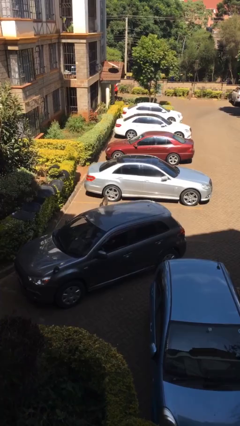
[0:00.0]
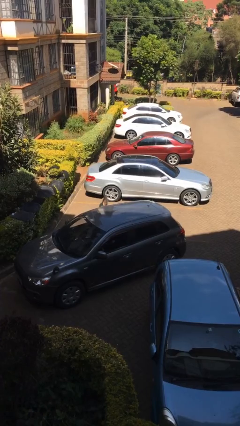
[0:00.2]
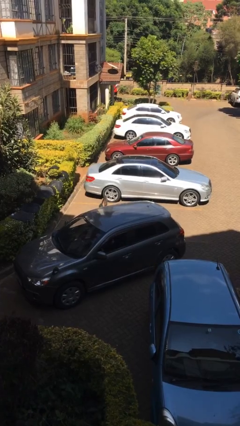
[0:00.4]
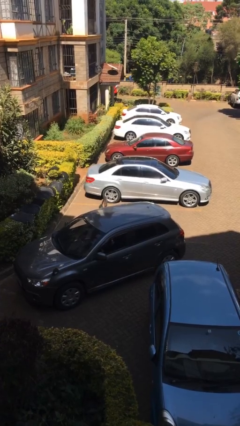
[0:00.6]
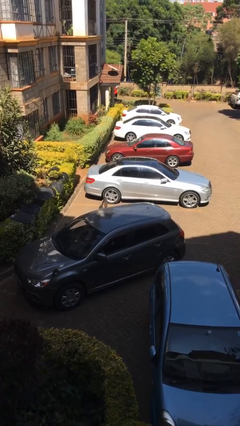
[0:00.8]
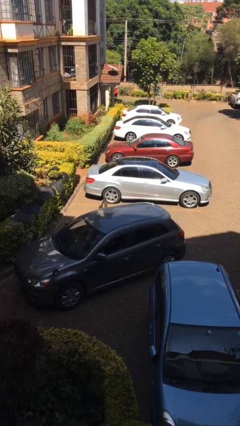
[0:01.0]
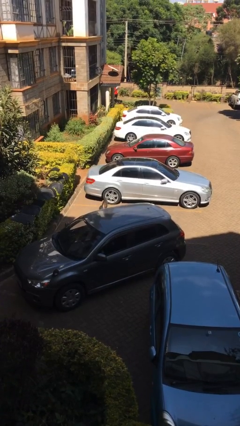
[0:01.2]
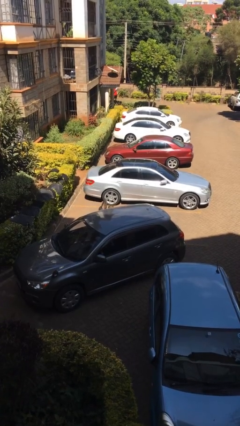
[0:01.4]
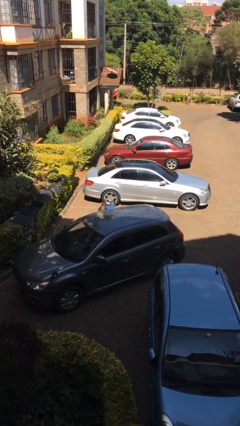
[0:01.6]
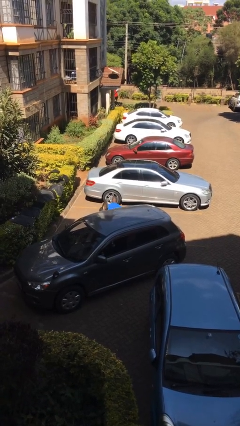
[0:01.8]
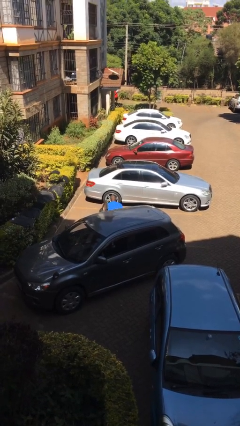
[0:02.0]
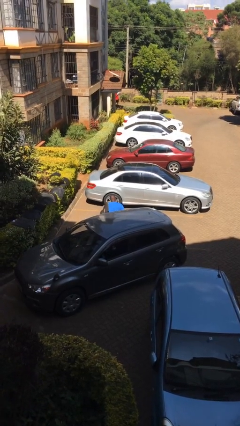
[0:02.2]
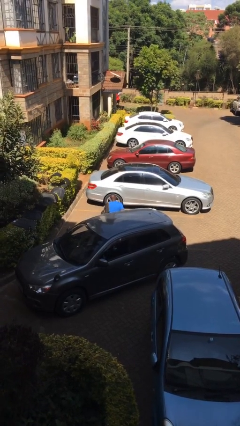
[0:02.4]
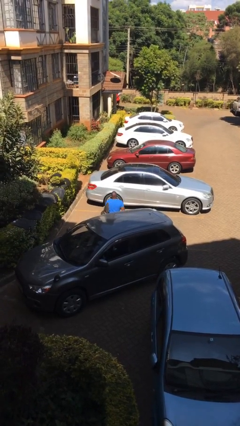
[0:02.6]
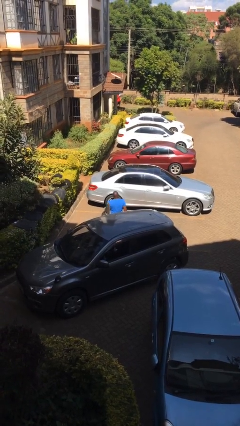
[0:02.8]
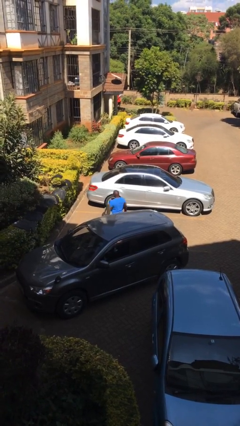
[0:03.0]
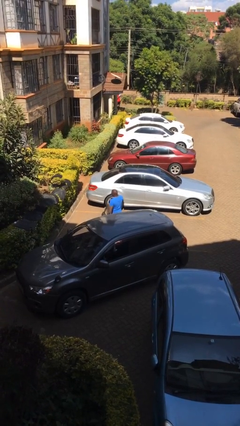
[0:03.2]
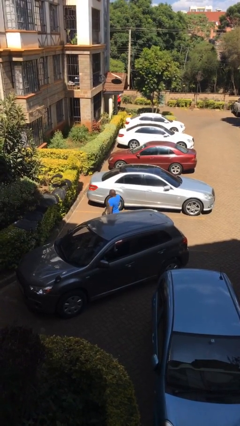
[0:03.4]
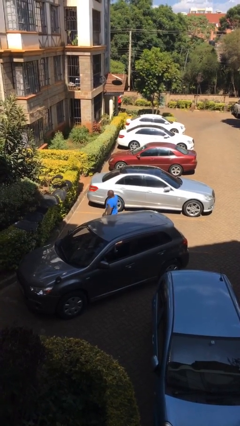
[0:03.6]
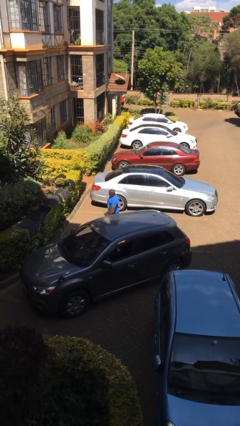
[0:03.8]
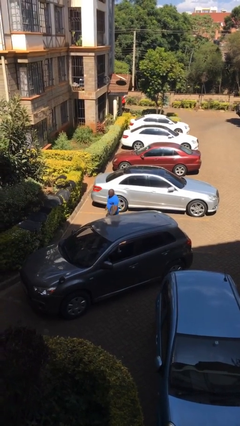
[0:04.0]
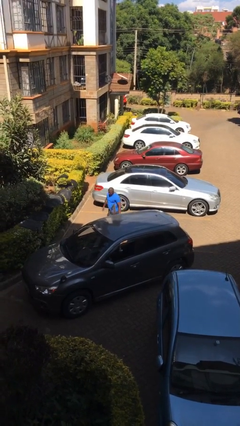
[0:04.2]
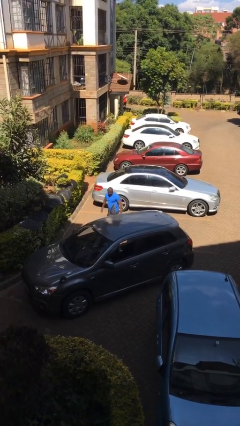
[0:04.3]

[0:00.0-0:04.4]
person exits car

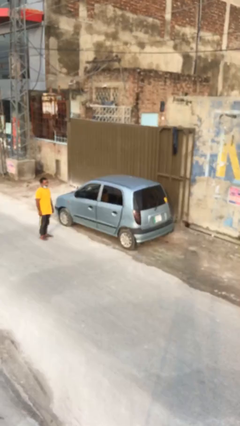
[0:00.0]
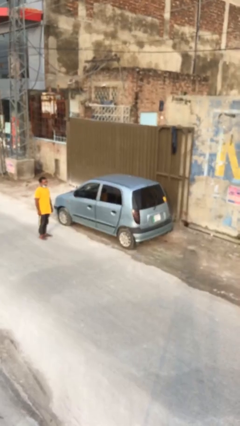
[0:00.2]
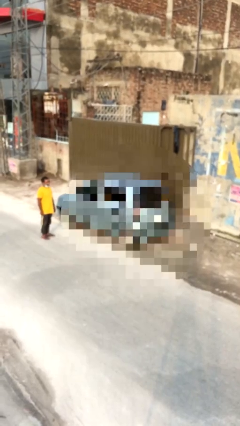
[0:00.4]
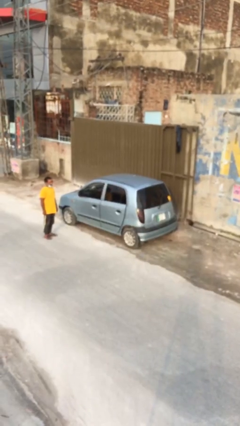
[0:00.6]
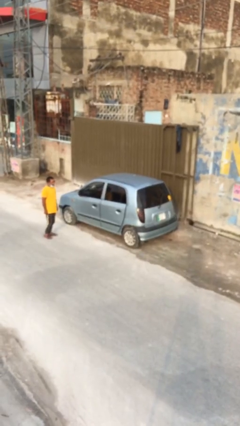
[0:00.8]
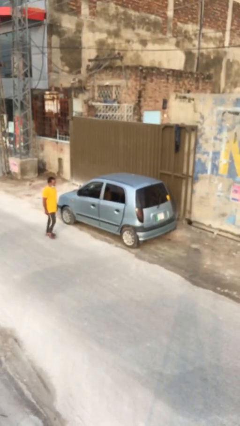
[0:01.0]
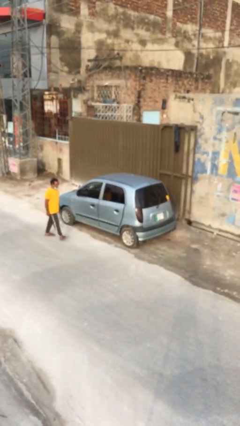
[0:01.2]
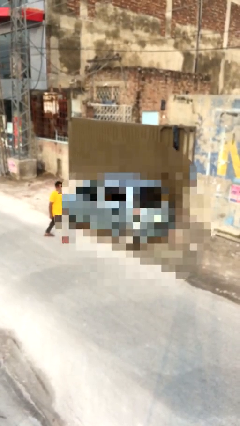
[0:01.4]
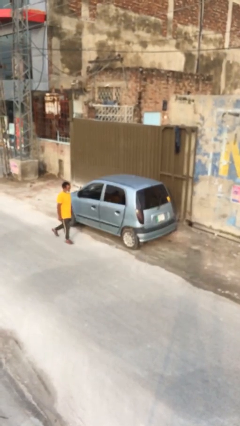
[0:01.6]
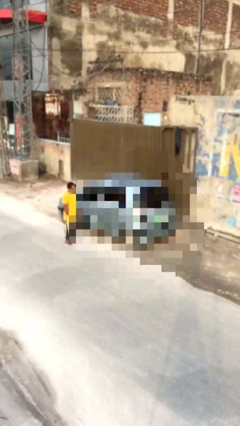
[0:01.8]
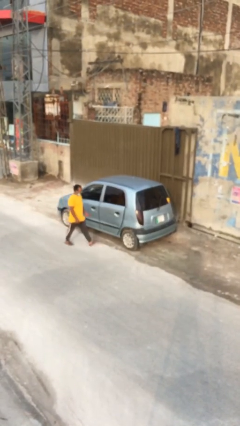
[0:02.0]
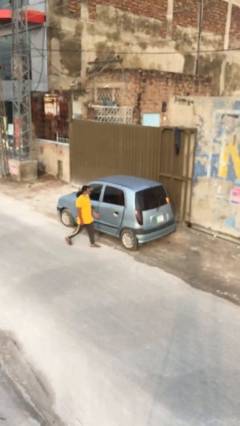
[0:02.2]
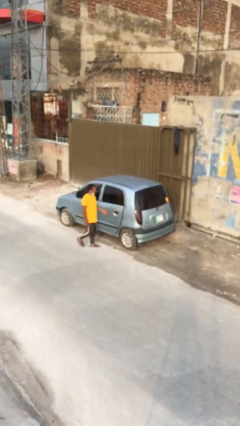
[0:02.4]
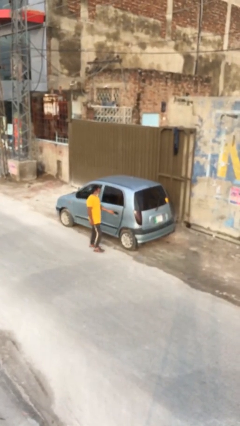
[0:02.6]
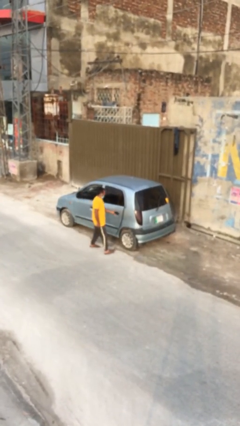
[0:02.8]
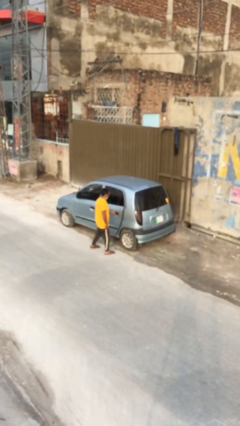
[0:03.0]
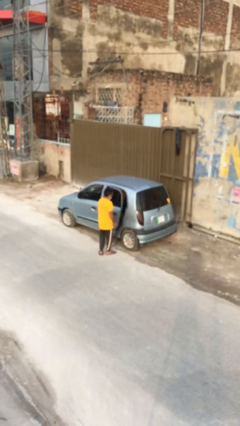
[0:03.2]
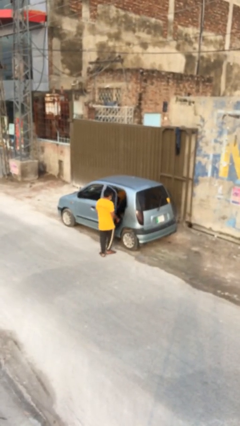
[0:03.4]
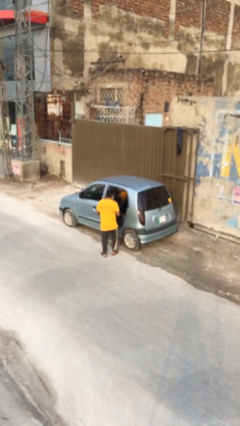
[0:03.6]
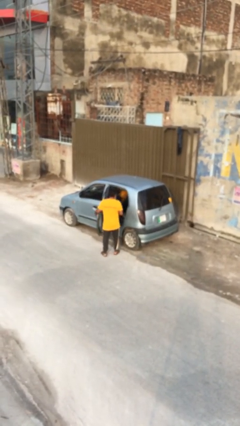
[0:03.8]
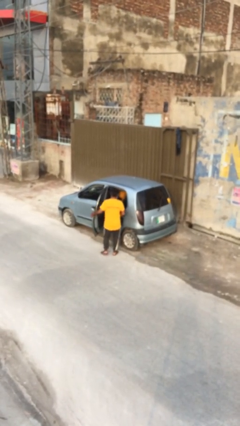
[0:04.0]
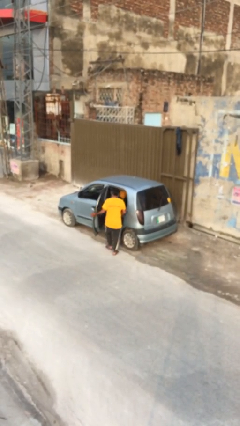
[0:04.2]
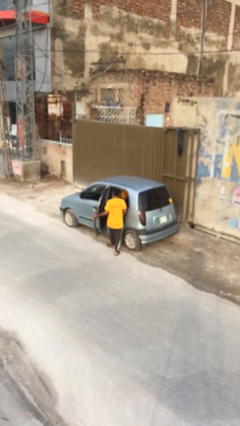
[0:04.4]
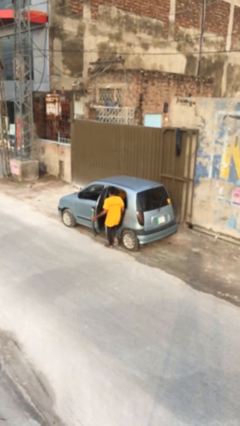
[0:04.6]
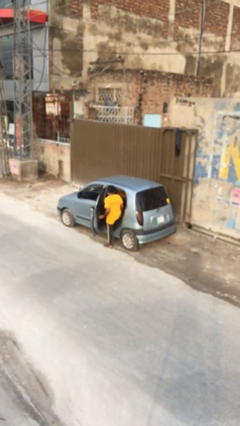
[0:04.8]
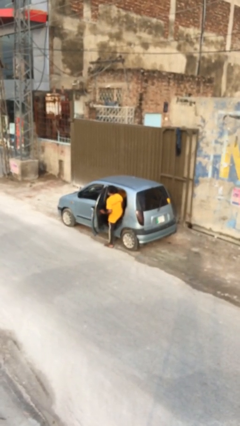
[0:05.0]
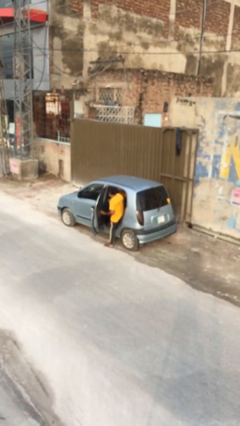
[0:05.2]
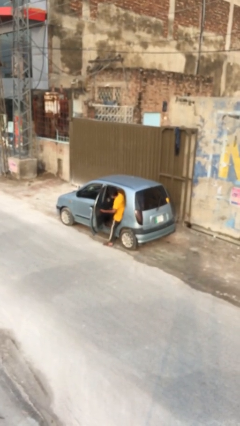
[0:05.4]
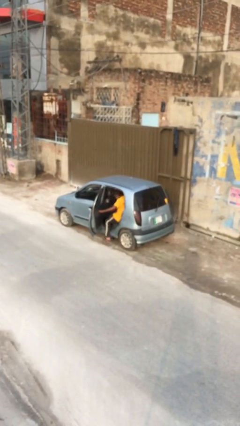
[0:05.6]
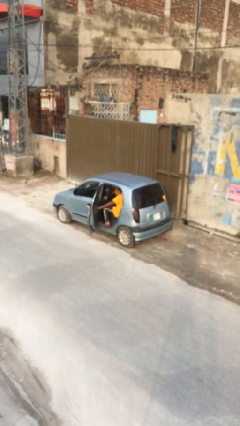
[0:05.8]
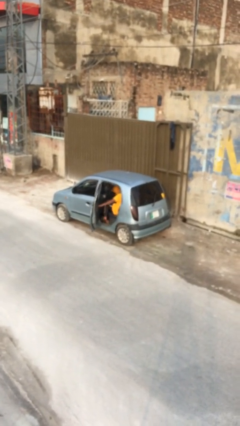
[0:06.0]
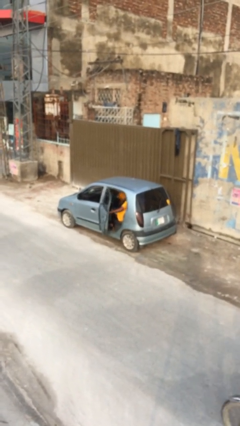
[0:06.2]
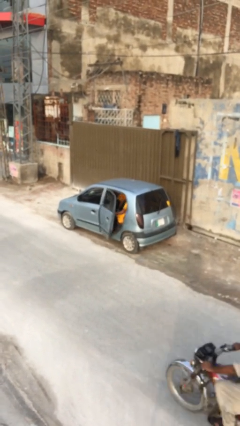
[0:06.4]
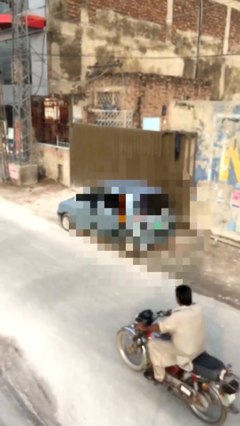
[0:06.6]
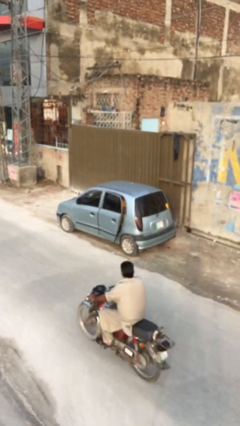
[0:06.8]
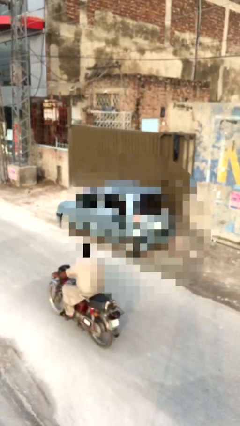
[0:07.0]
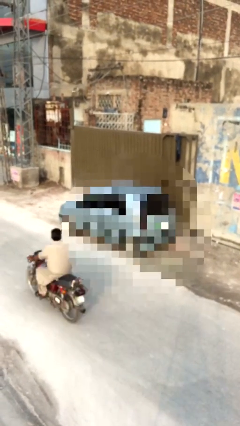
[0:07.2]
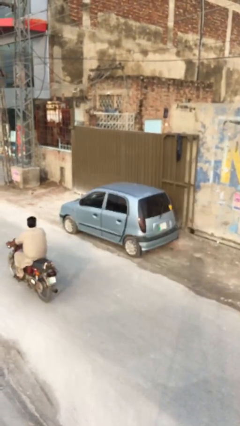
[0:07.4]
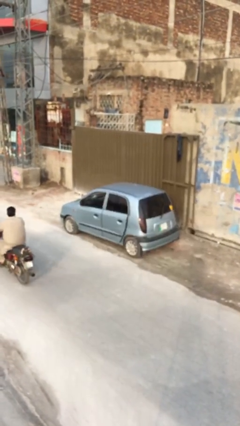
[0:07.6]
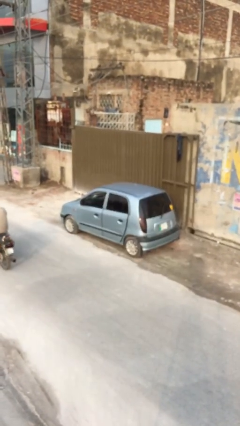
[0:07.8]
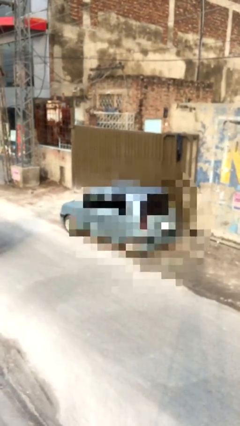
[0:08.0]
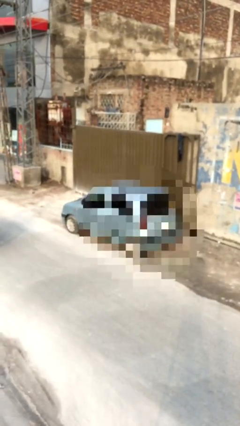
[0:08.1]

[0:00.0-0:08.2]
car picks up person

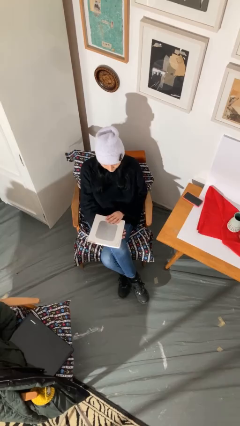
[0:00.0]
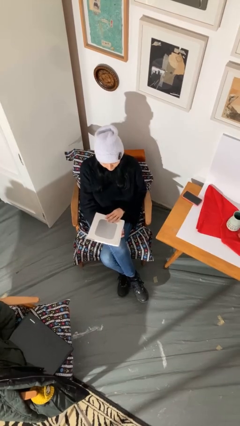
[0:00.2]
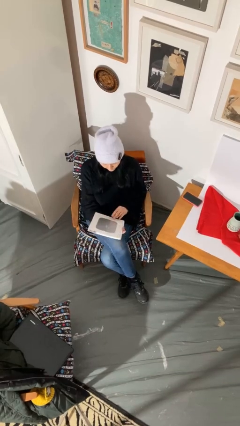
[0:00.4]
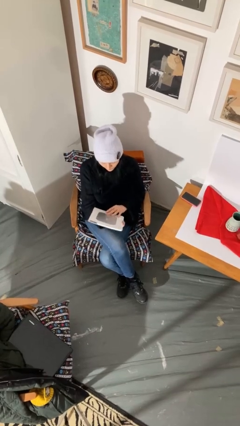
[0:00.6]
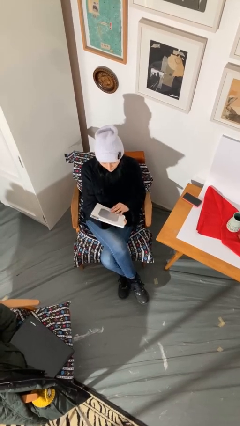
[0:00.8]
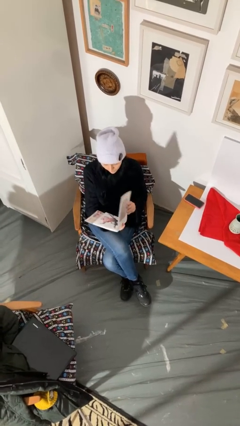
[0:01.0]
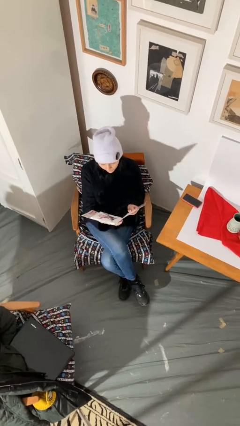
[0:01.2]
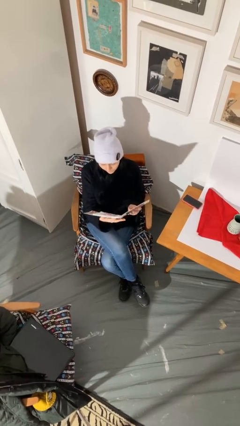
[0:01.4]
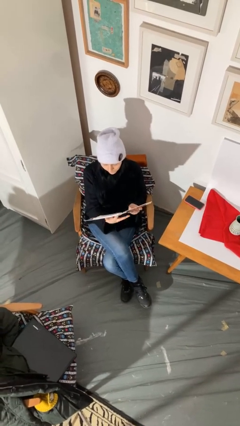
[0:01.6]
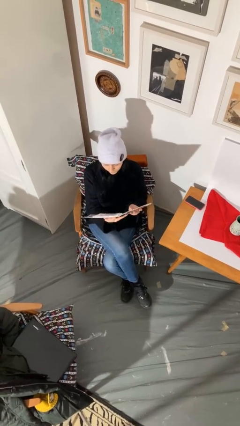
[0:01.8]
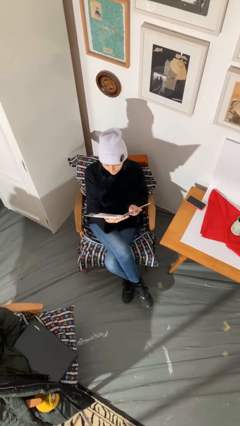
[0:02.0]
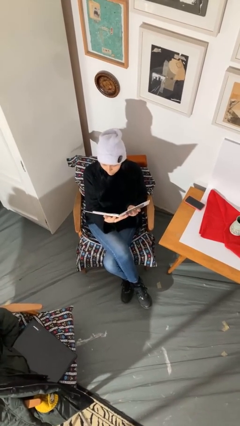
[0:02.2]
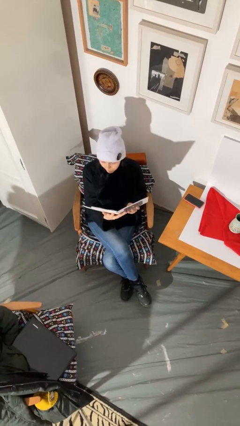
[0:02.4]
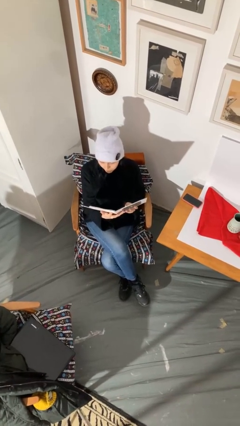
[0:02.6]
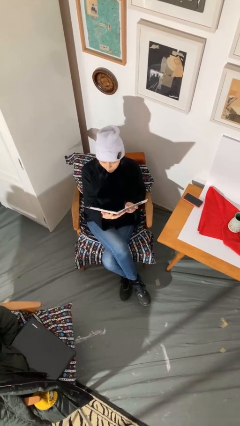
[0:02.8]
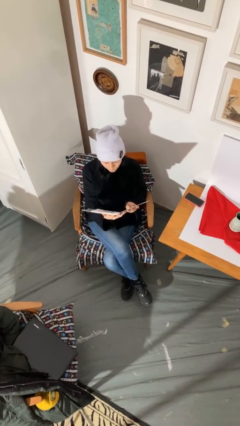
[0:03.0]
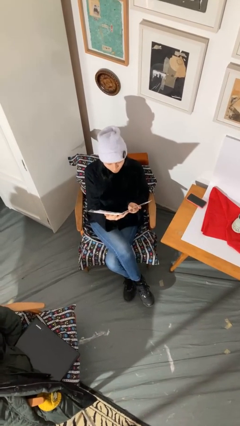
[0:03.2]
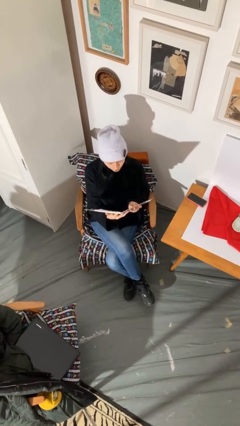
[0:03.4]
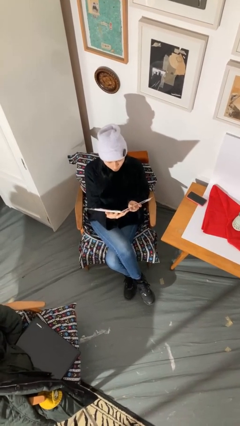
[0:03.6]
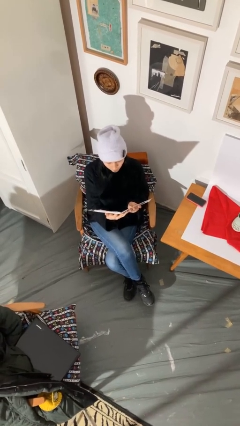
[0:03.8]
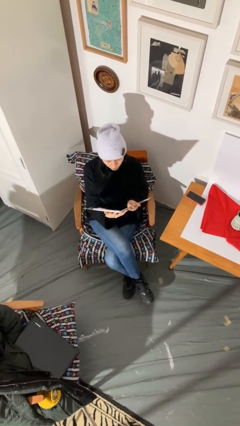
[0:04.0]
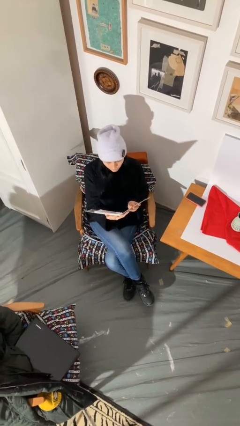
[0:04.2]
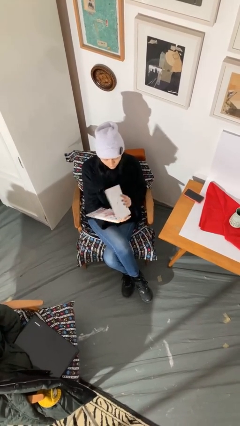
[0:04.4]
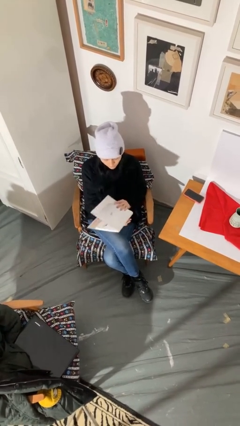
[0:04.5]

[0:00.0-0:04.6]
person reads document

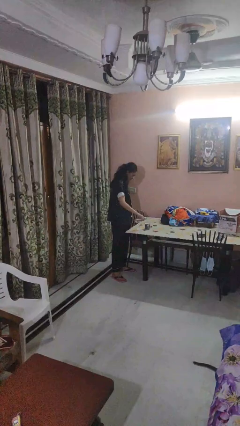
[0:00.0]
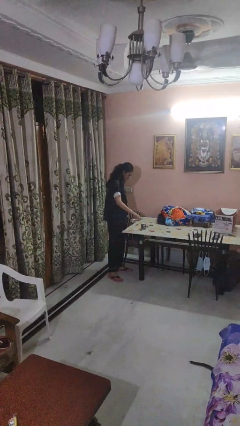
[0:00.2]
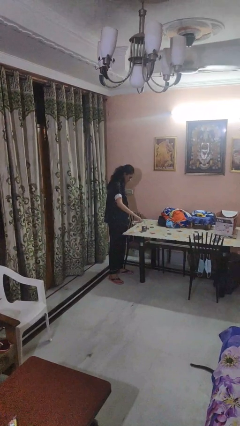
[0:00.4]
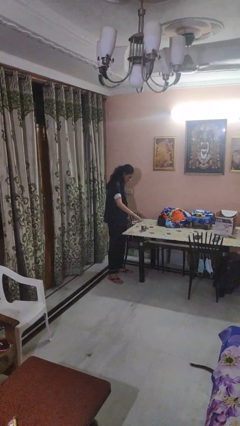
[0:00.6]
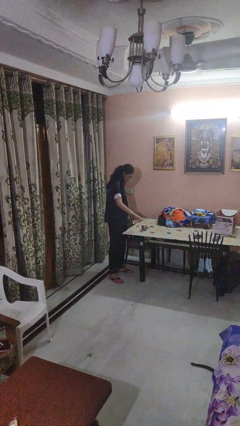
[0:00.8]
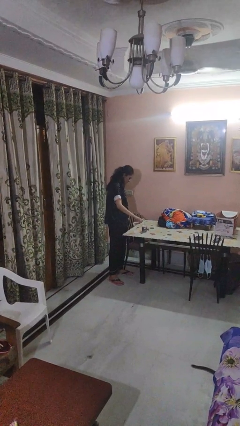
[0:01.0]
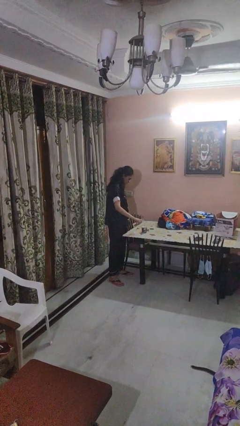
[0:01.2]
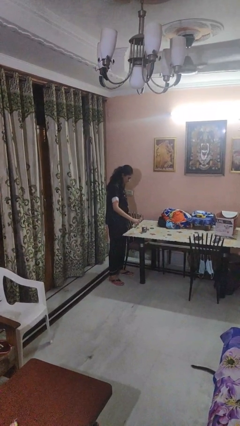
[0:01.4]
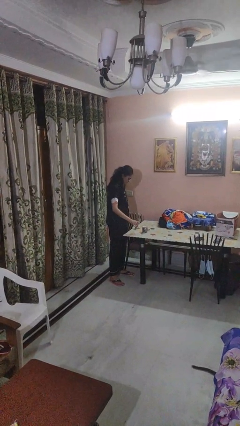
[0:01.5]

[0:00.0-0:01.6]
person pours liquid into cup
